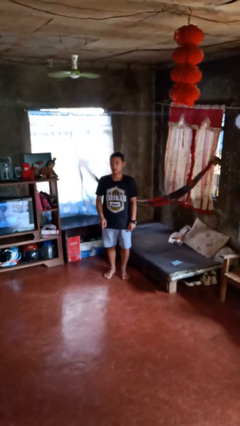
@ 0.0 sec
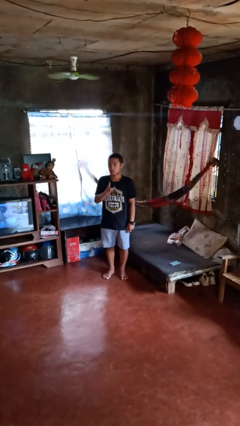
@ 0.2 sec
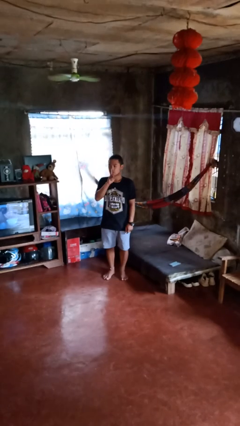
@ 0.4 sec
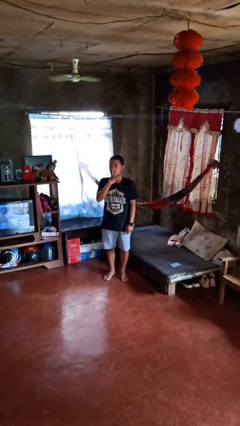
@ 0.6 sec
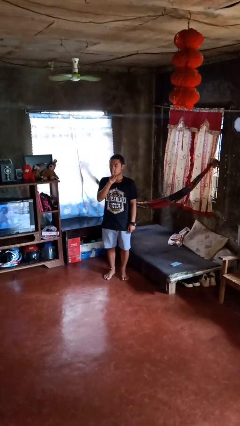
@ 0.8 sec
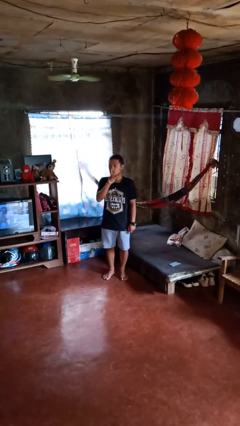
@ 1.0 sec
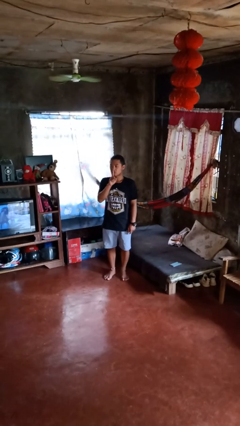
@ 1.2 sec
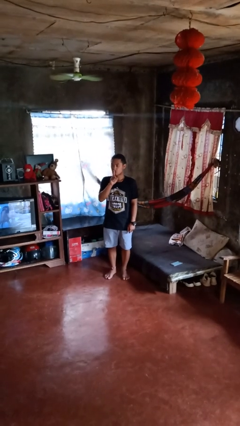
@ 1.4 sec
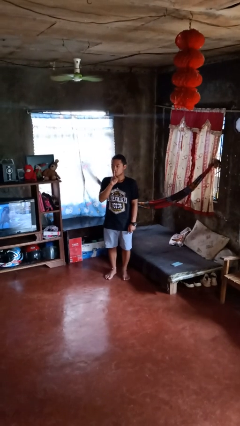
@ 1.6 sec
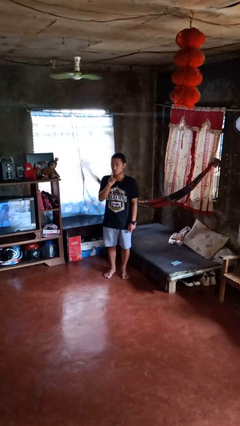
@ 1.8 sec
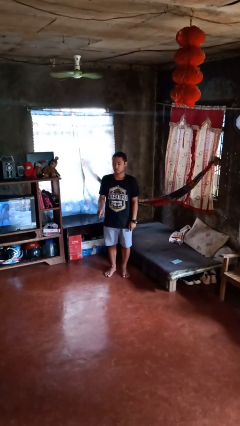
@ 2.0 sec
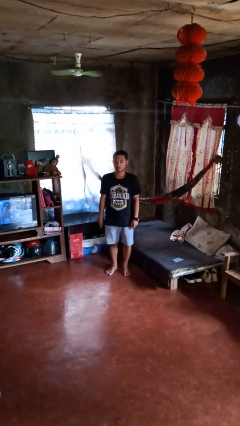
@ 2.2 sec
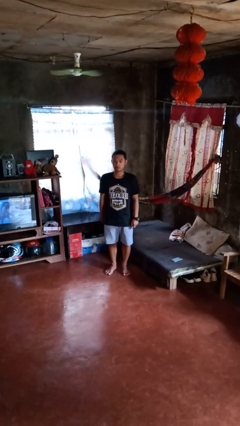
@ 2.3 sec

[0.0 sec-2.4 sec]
person gestures be quiet

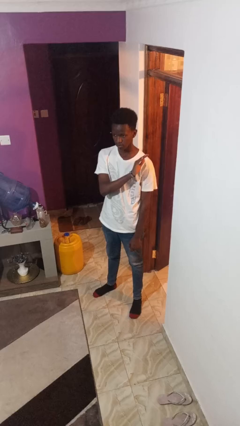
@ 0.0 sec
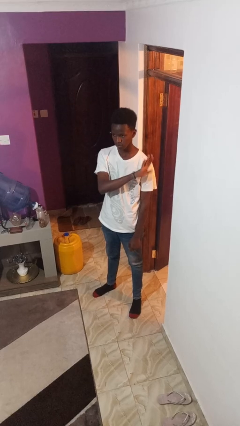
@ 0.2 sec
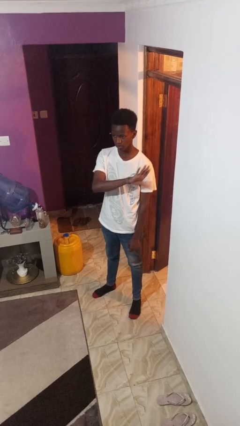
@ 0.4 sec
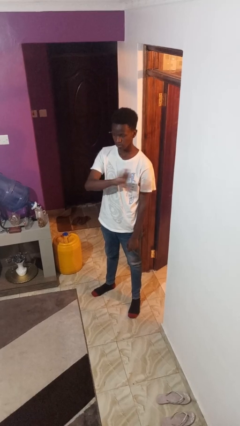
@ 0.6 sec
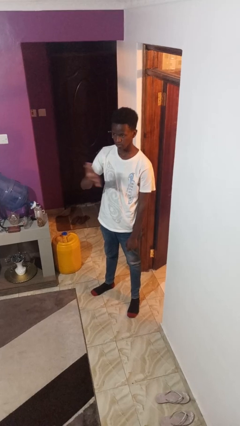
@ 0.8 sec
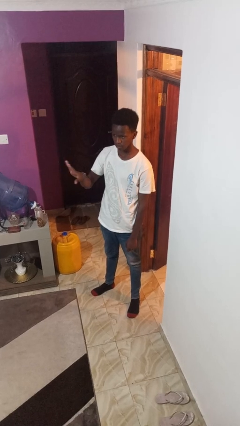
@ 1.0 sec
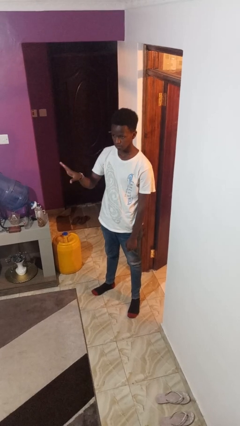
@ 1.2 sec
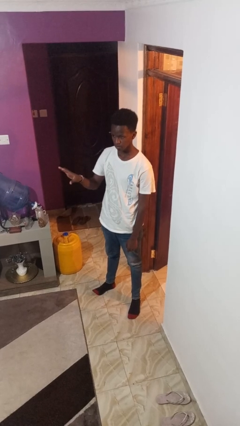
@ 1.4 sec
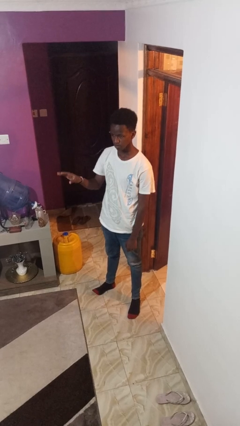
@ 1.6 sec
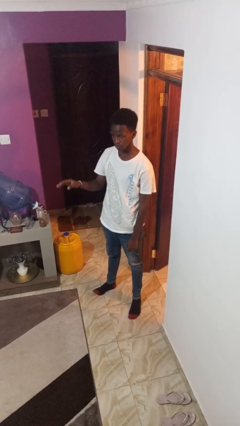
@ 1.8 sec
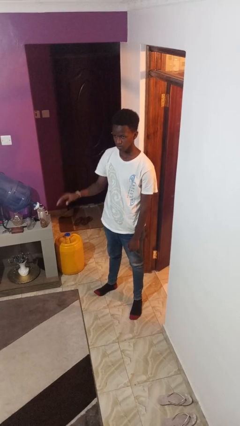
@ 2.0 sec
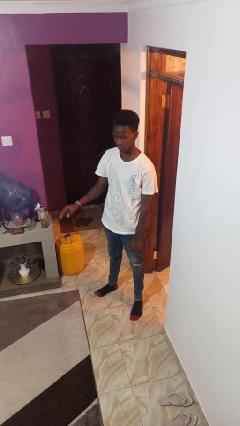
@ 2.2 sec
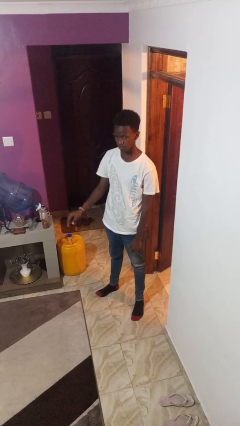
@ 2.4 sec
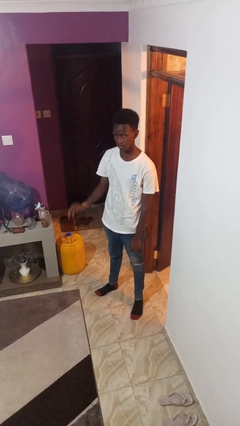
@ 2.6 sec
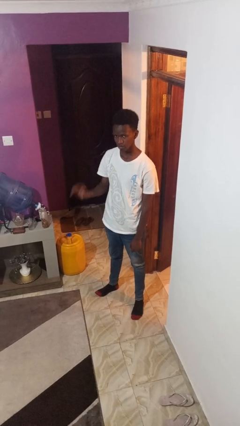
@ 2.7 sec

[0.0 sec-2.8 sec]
person gestures swipe right

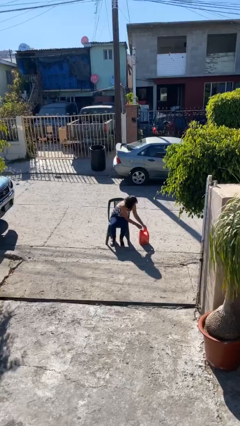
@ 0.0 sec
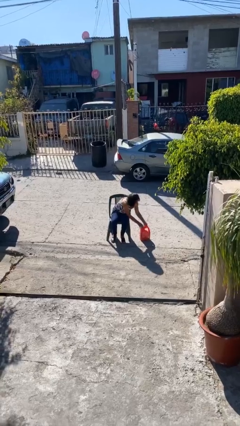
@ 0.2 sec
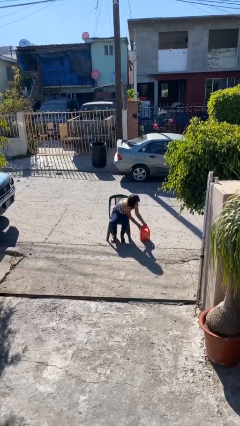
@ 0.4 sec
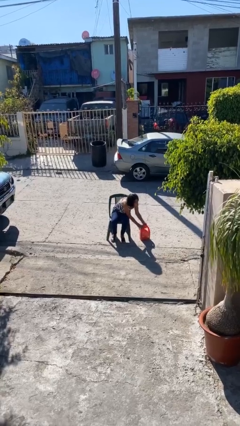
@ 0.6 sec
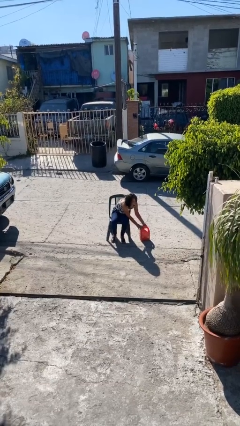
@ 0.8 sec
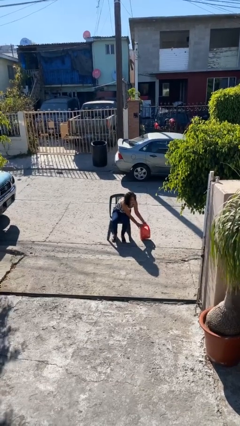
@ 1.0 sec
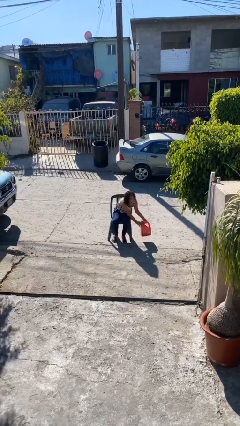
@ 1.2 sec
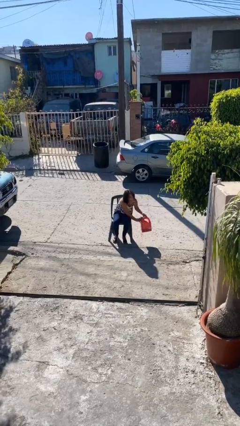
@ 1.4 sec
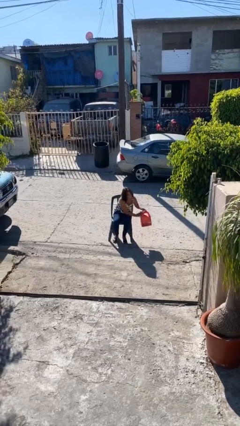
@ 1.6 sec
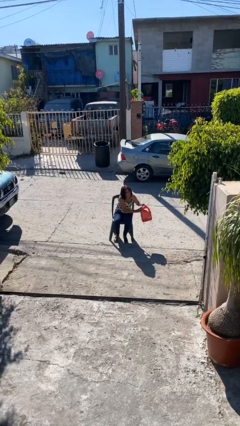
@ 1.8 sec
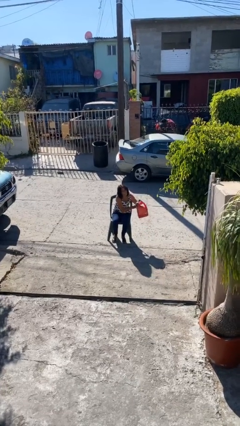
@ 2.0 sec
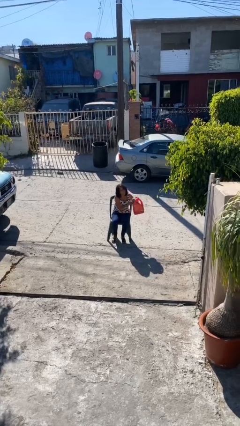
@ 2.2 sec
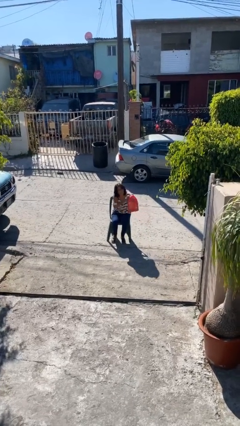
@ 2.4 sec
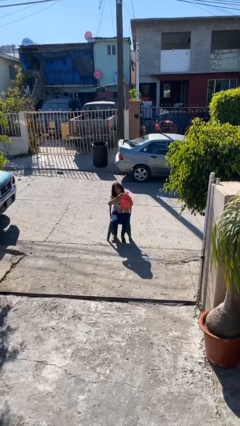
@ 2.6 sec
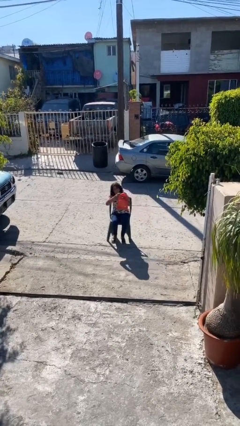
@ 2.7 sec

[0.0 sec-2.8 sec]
person picks up object from floor

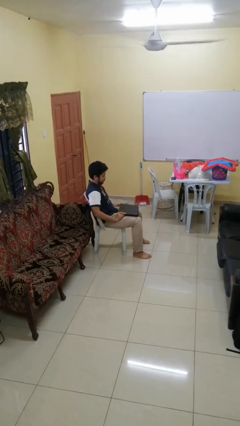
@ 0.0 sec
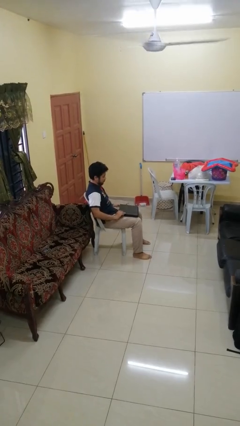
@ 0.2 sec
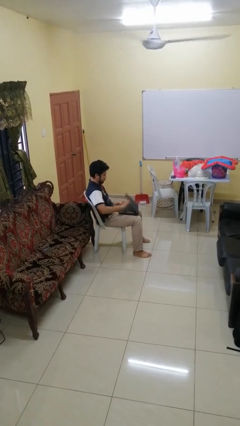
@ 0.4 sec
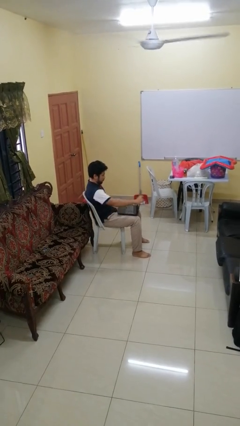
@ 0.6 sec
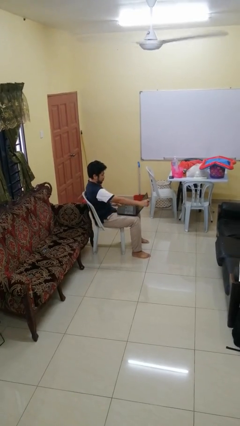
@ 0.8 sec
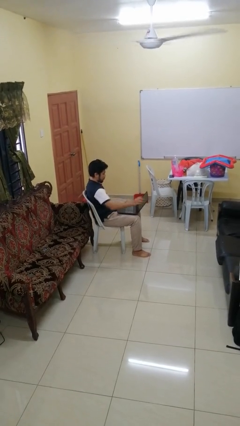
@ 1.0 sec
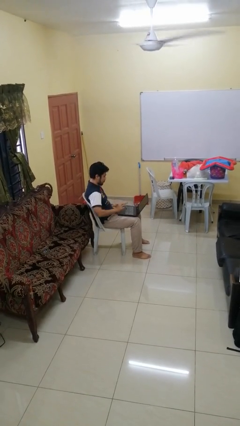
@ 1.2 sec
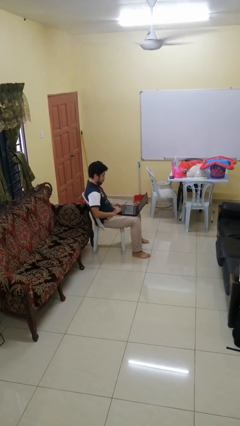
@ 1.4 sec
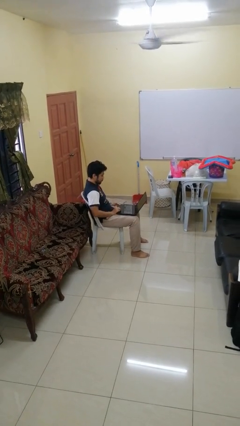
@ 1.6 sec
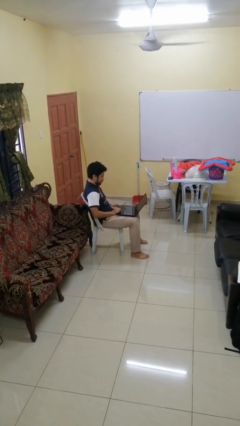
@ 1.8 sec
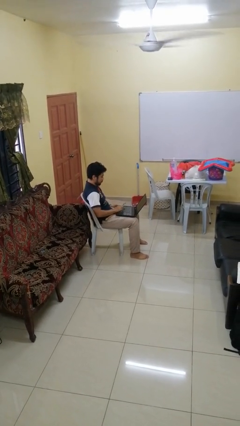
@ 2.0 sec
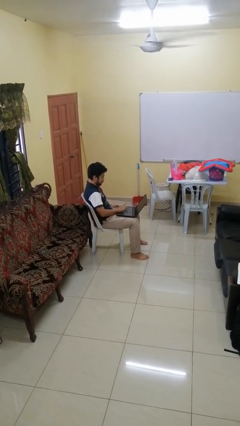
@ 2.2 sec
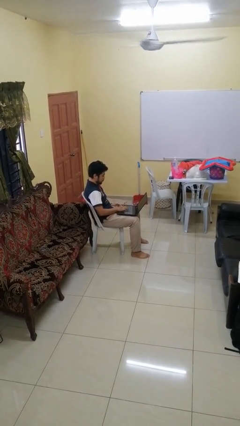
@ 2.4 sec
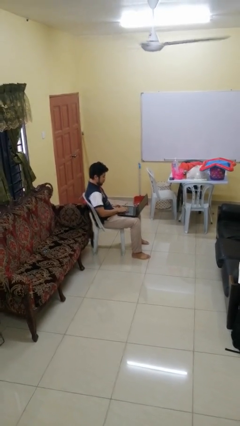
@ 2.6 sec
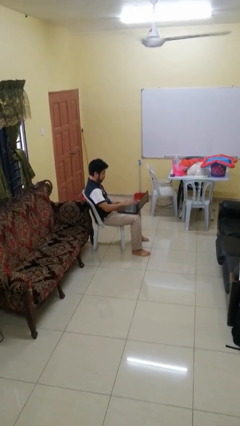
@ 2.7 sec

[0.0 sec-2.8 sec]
person opens laptop

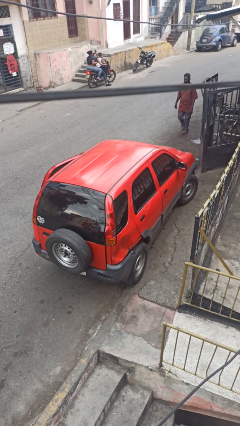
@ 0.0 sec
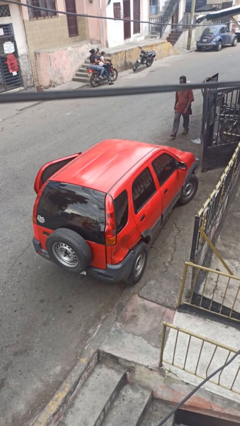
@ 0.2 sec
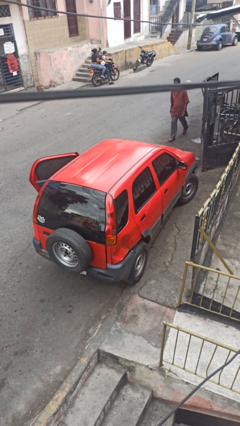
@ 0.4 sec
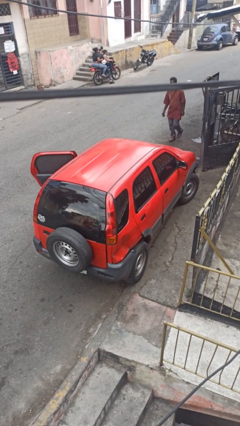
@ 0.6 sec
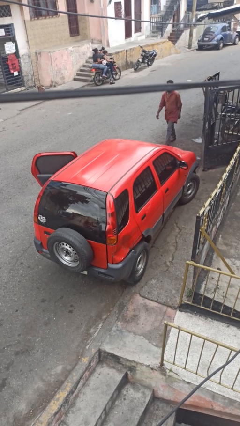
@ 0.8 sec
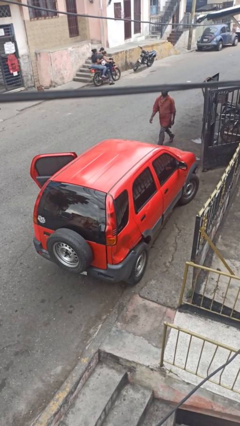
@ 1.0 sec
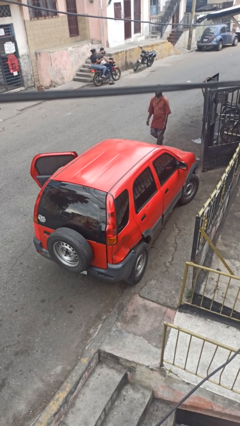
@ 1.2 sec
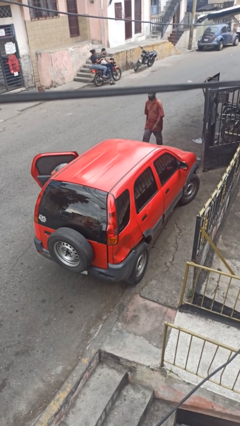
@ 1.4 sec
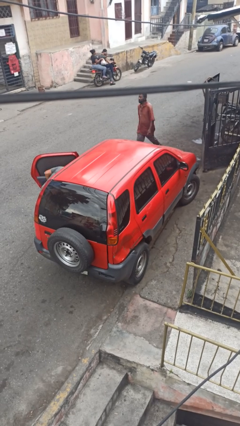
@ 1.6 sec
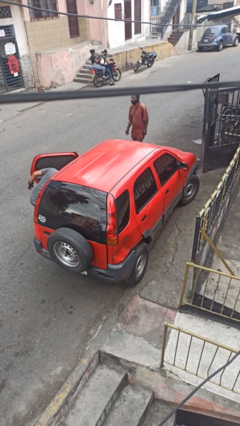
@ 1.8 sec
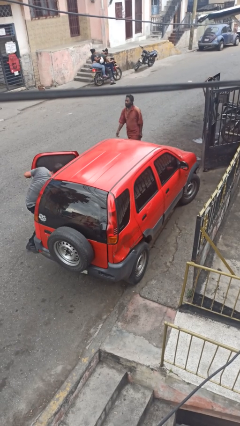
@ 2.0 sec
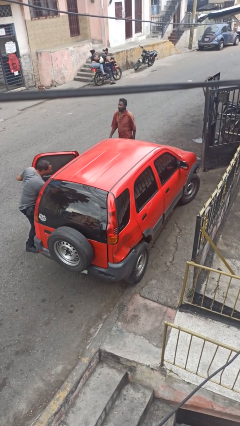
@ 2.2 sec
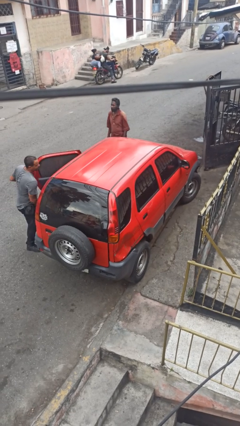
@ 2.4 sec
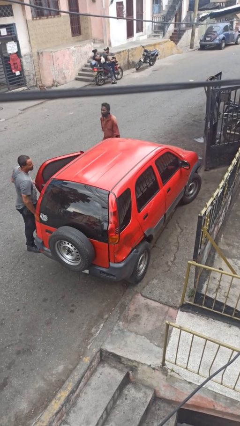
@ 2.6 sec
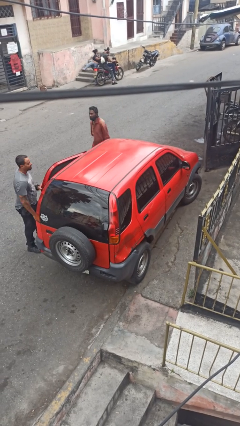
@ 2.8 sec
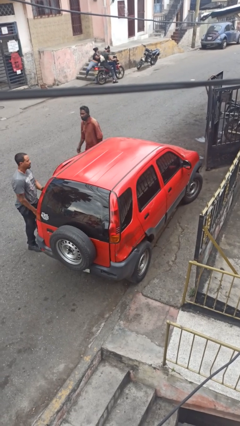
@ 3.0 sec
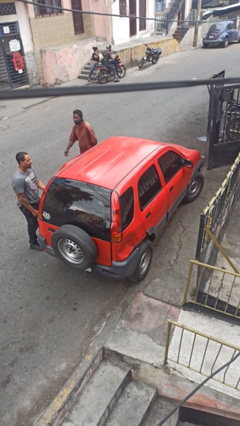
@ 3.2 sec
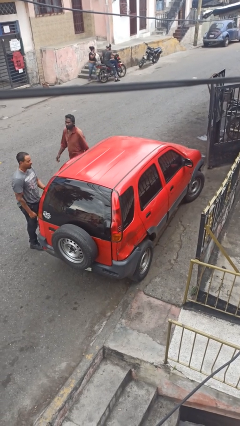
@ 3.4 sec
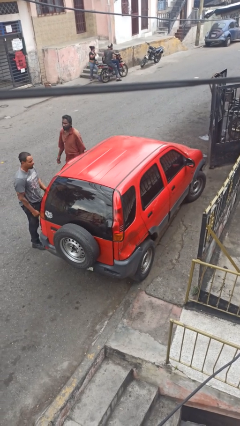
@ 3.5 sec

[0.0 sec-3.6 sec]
car drops off person

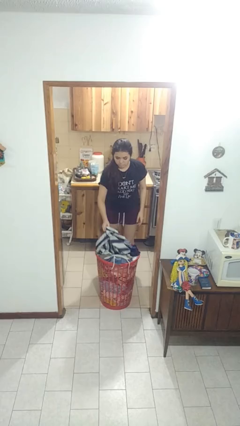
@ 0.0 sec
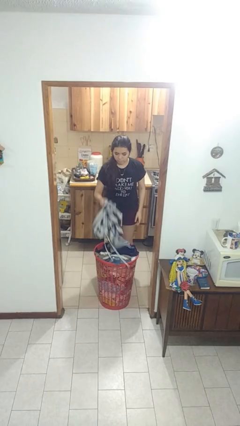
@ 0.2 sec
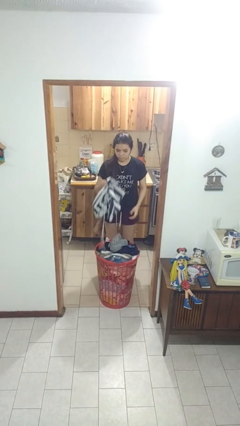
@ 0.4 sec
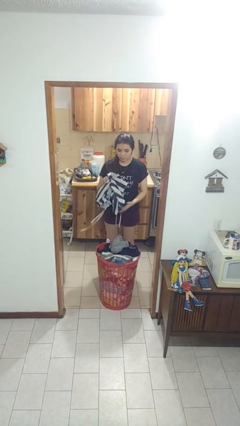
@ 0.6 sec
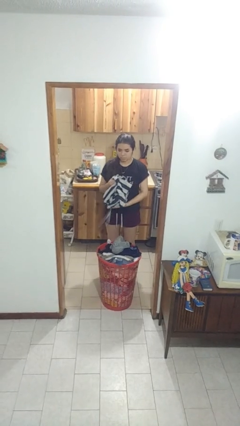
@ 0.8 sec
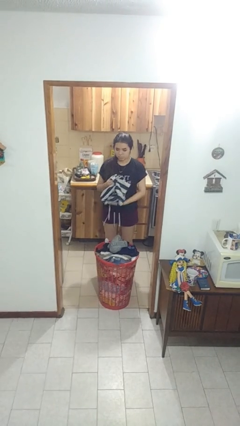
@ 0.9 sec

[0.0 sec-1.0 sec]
person takes object from basket

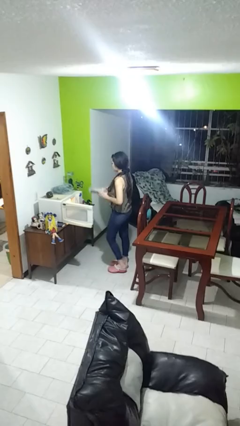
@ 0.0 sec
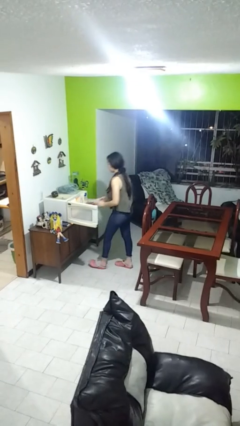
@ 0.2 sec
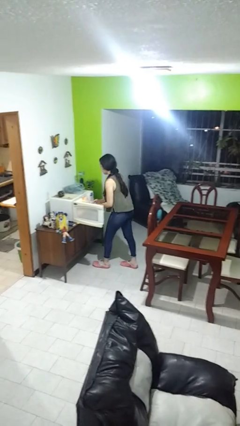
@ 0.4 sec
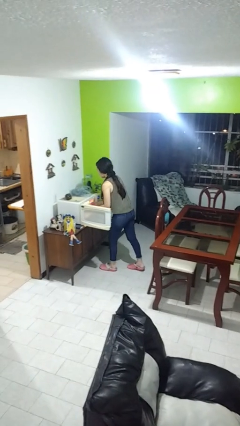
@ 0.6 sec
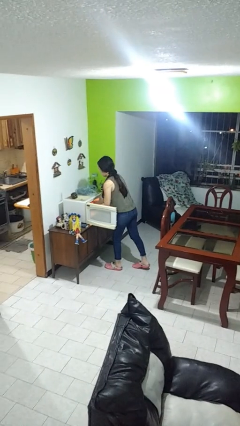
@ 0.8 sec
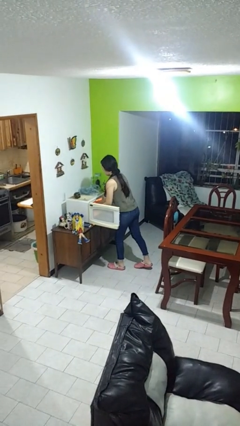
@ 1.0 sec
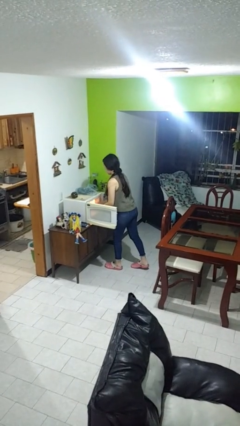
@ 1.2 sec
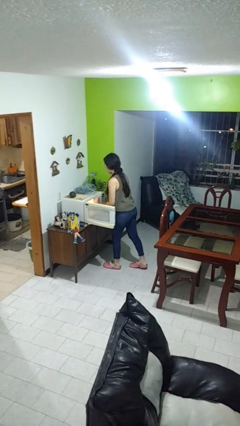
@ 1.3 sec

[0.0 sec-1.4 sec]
person puts object into microwave

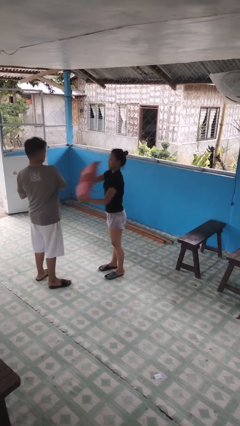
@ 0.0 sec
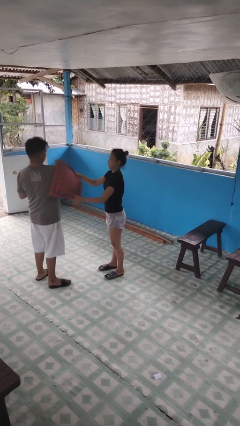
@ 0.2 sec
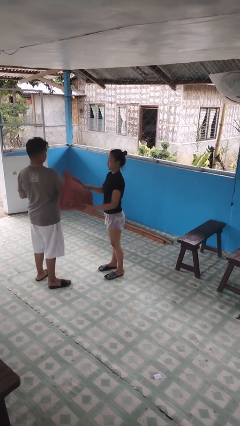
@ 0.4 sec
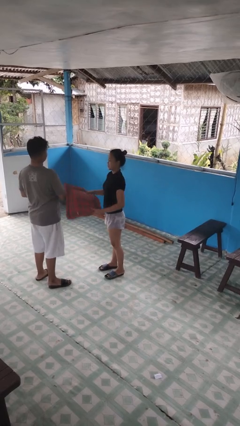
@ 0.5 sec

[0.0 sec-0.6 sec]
person hits person with pillow
